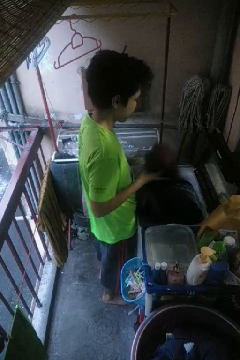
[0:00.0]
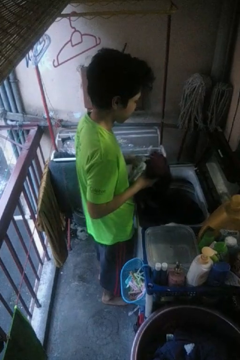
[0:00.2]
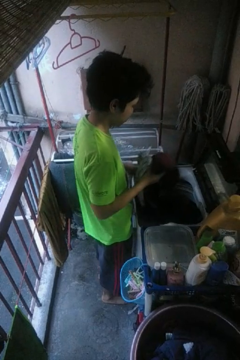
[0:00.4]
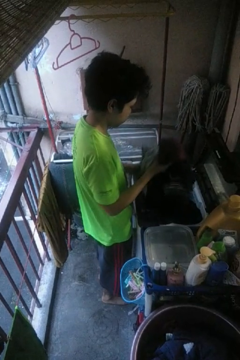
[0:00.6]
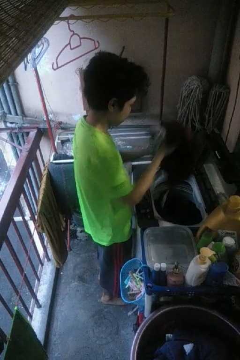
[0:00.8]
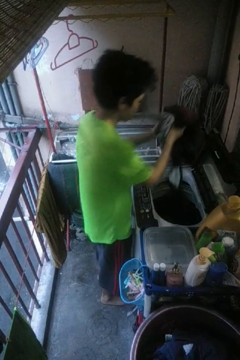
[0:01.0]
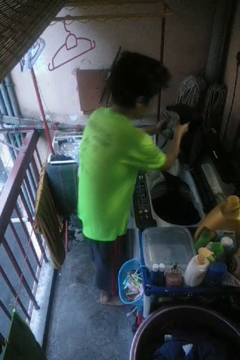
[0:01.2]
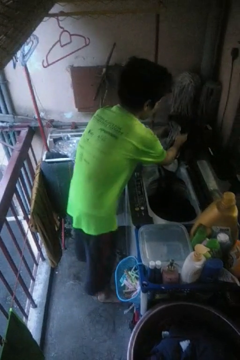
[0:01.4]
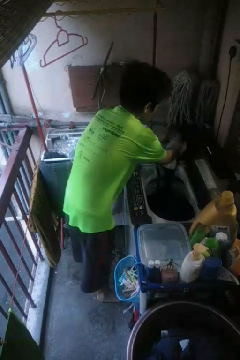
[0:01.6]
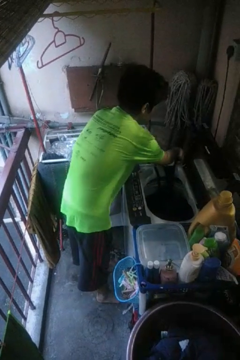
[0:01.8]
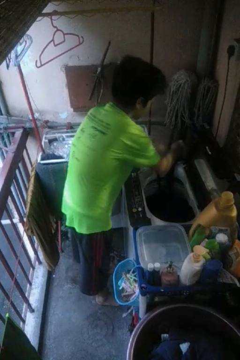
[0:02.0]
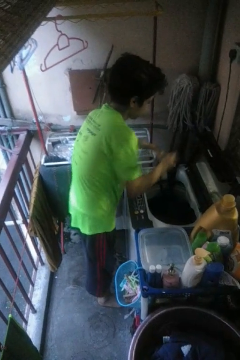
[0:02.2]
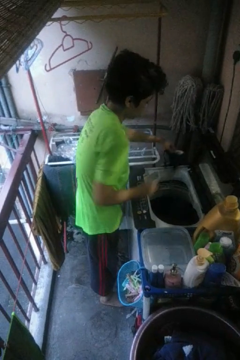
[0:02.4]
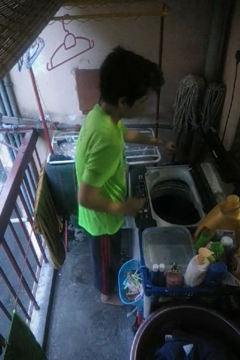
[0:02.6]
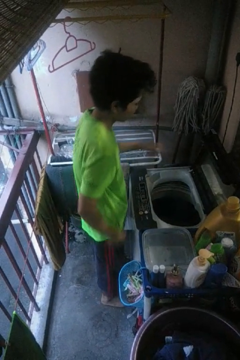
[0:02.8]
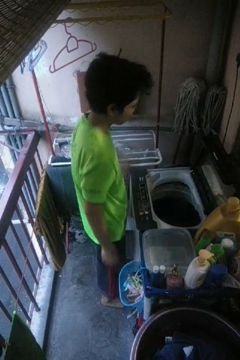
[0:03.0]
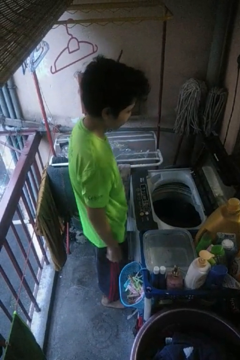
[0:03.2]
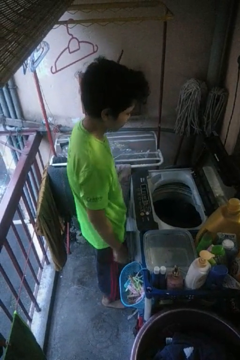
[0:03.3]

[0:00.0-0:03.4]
person loads dryer

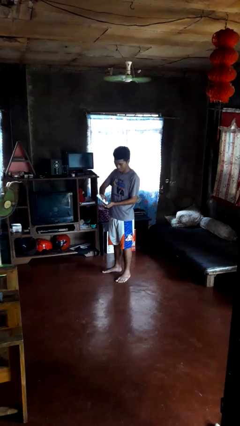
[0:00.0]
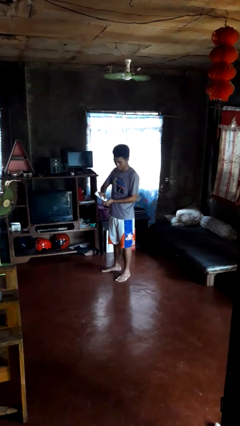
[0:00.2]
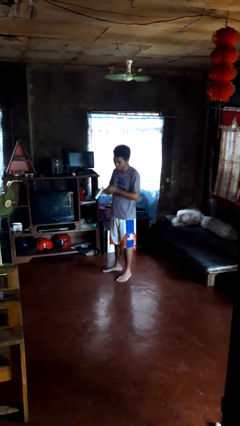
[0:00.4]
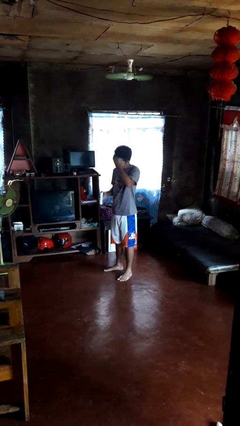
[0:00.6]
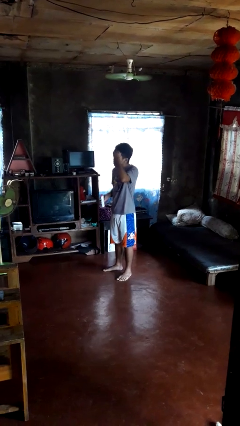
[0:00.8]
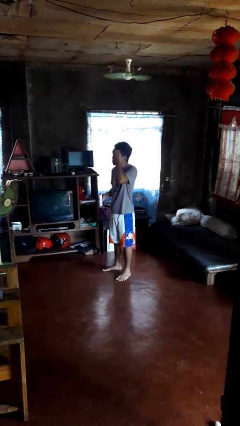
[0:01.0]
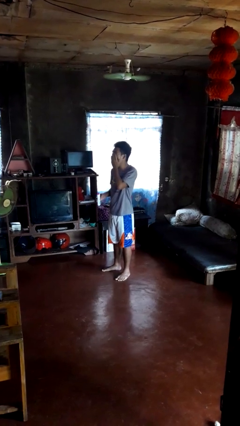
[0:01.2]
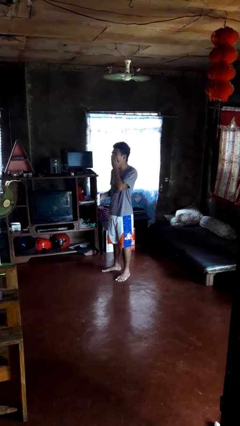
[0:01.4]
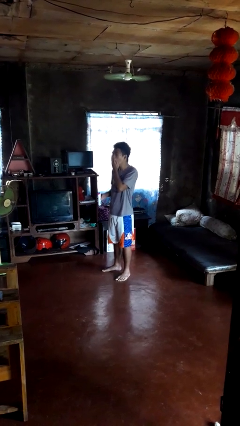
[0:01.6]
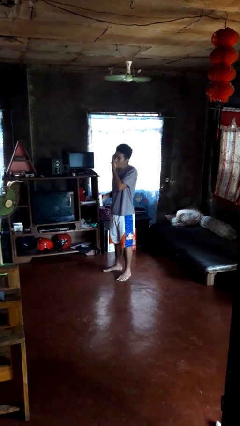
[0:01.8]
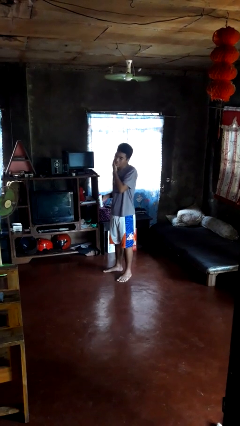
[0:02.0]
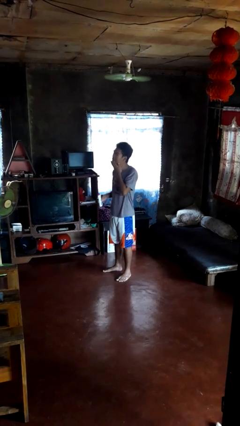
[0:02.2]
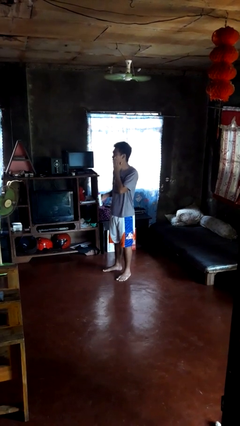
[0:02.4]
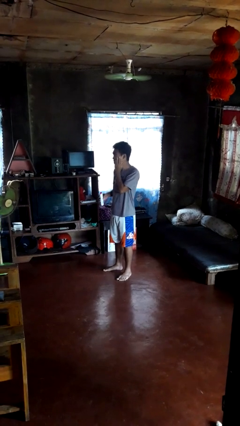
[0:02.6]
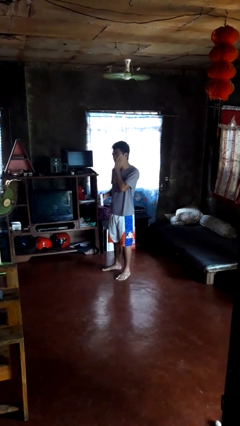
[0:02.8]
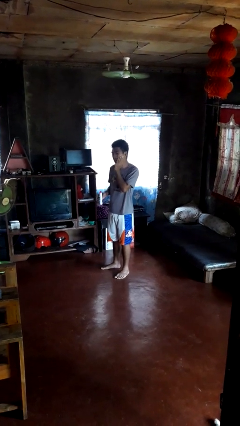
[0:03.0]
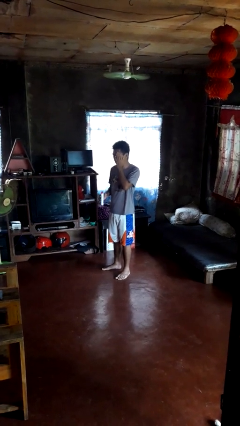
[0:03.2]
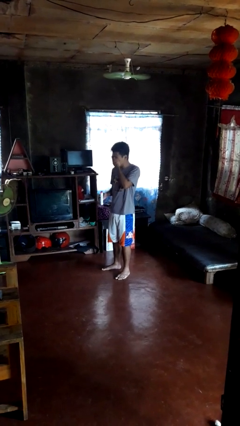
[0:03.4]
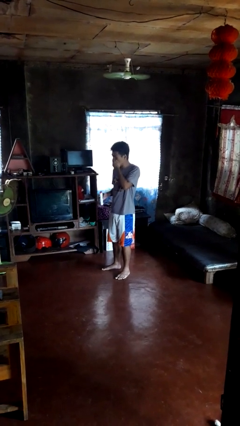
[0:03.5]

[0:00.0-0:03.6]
person applies facial moisturizer

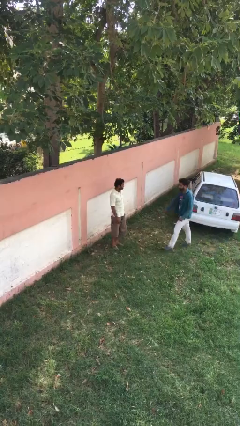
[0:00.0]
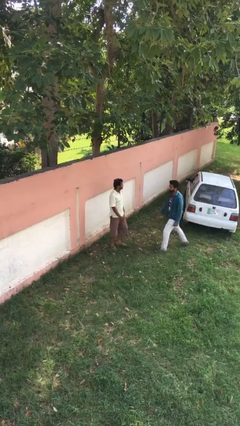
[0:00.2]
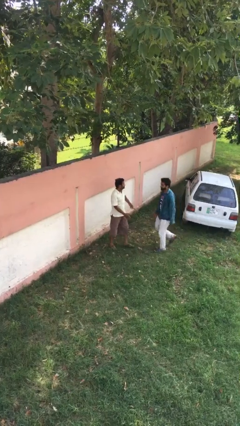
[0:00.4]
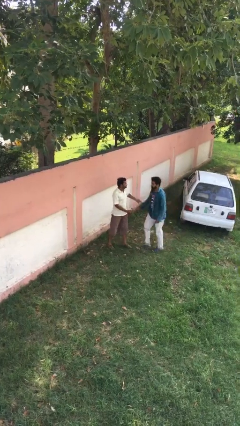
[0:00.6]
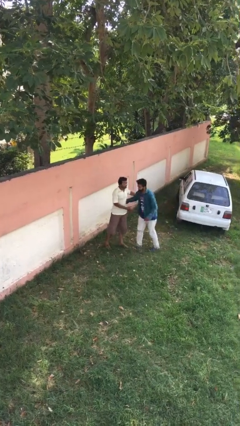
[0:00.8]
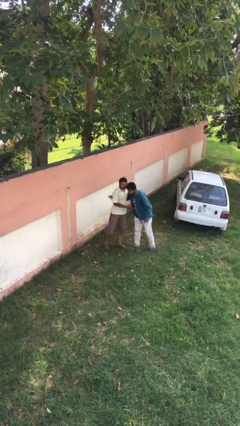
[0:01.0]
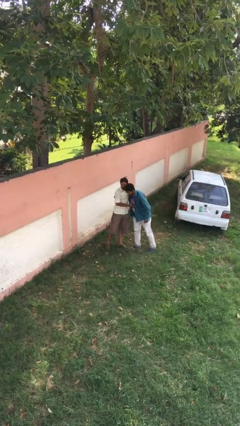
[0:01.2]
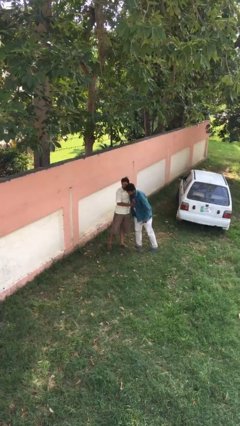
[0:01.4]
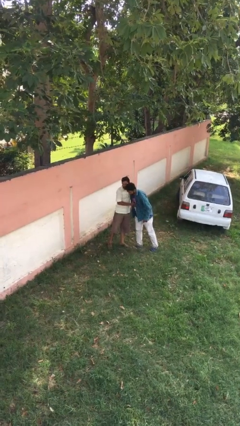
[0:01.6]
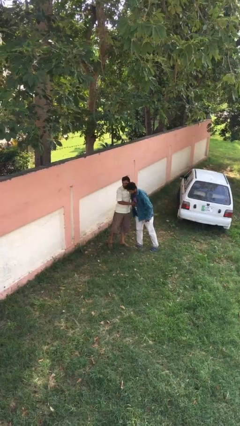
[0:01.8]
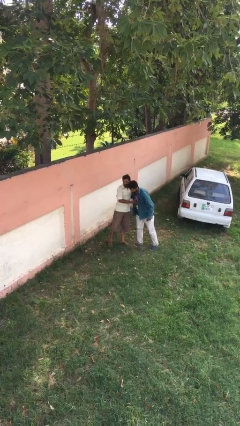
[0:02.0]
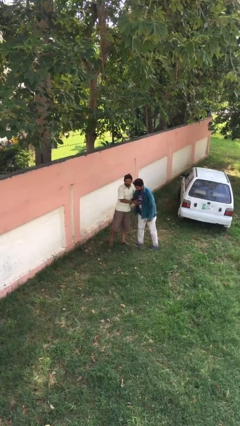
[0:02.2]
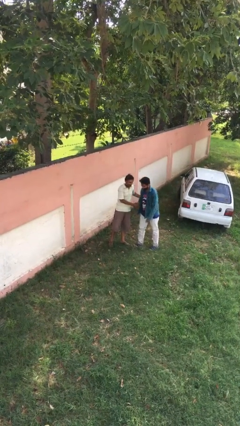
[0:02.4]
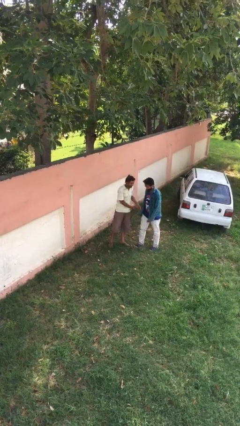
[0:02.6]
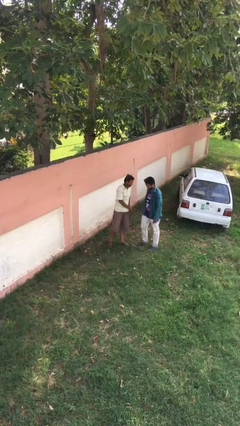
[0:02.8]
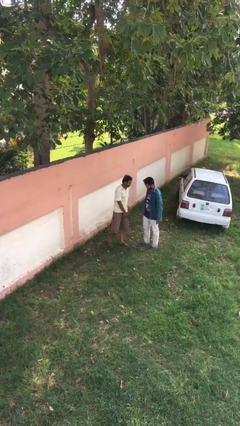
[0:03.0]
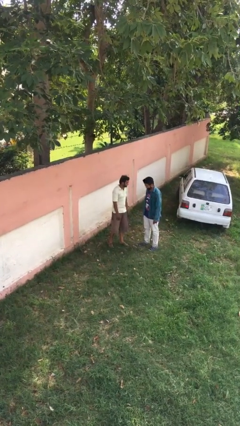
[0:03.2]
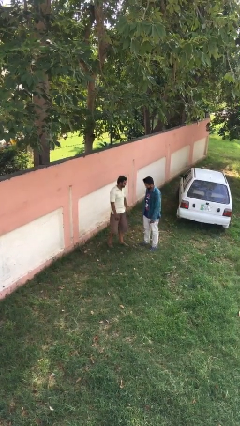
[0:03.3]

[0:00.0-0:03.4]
person embraces person

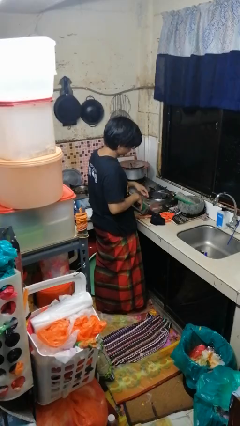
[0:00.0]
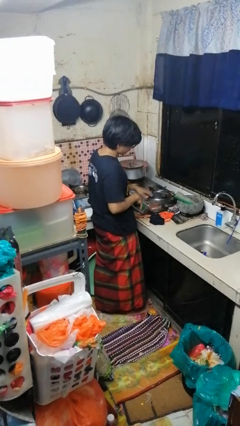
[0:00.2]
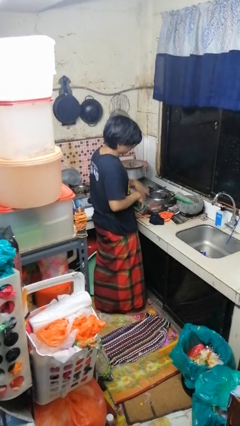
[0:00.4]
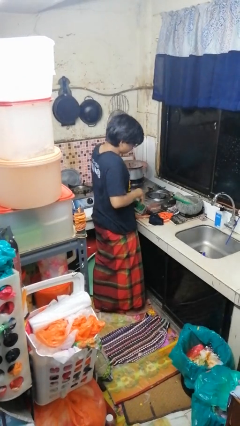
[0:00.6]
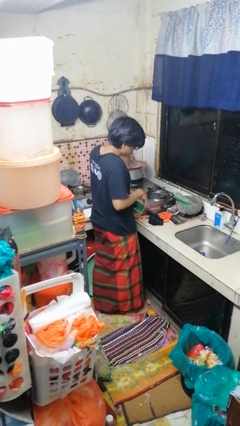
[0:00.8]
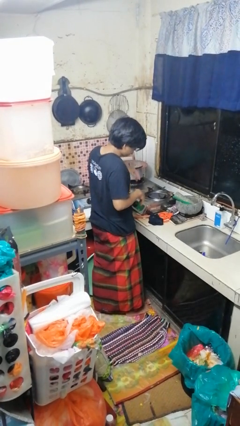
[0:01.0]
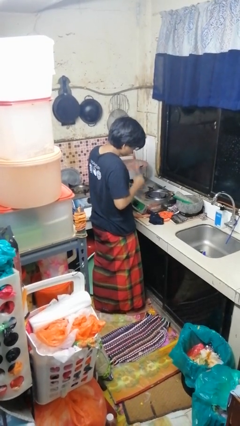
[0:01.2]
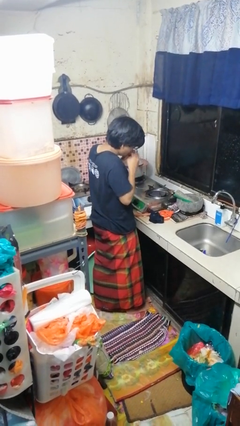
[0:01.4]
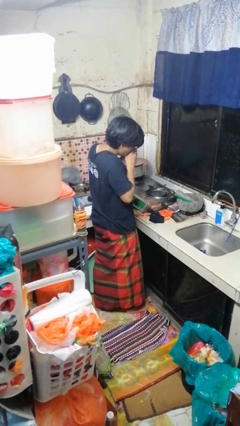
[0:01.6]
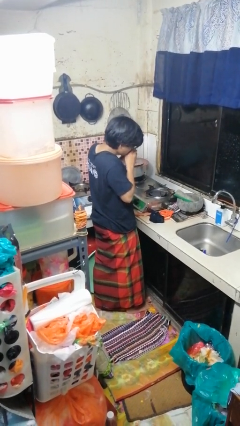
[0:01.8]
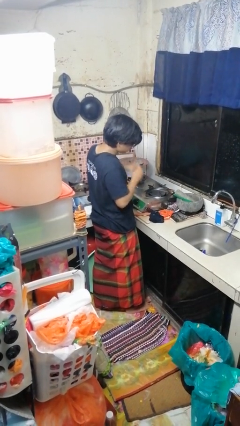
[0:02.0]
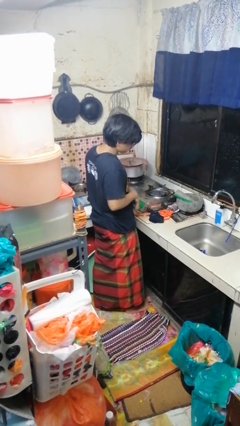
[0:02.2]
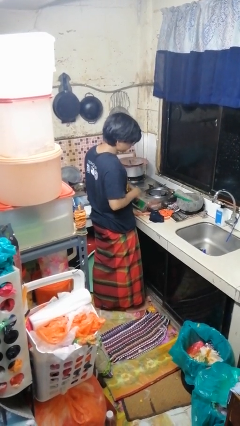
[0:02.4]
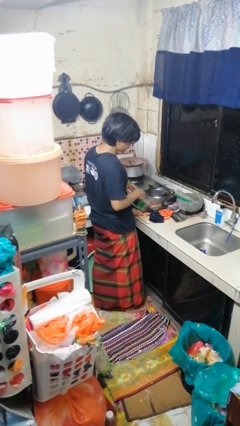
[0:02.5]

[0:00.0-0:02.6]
person burns hand

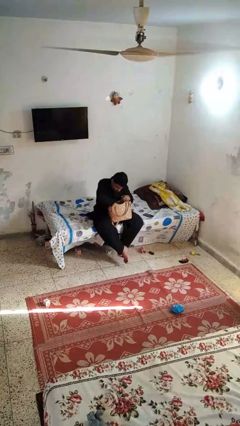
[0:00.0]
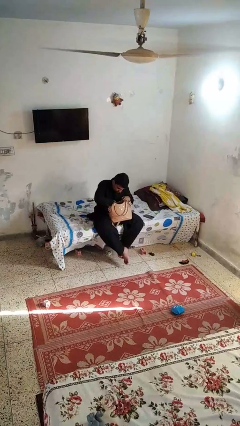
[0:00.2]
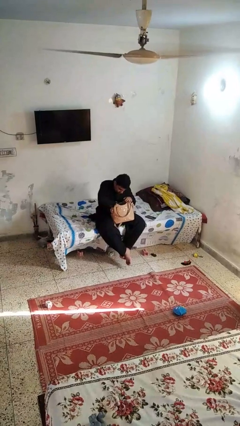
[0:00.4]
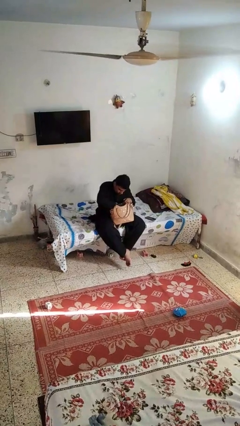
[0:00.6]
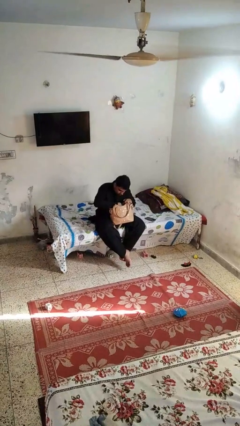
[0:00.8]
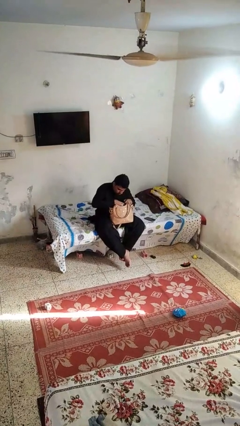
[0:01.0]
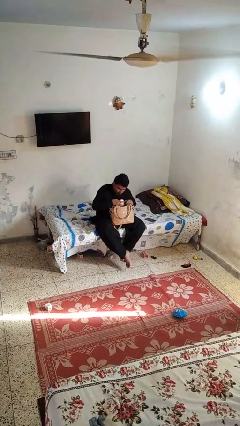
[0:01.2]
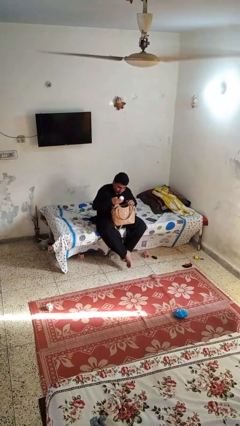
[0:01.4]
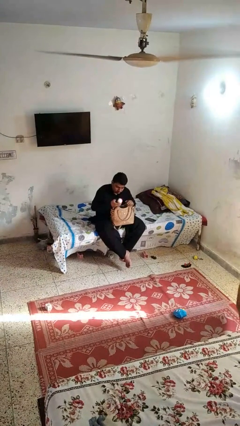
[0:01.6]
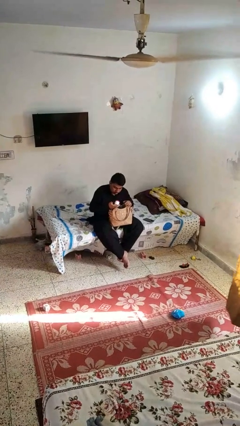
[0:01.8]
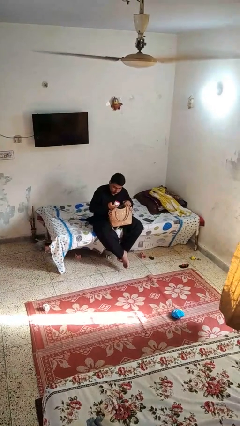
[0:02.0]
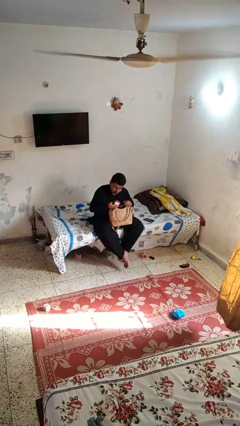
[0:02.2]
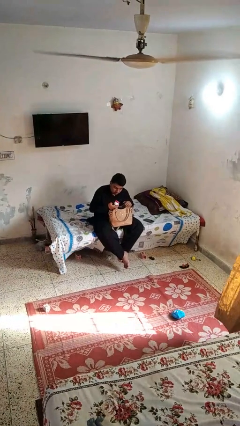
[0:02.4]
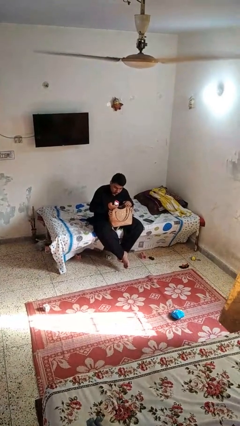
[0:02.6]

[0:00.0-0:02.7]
person takes object from purse

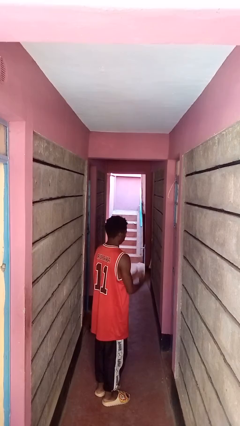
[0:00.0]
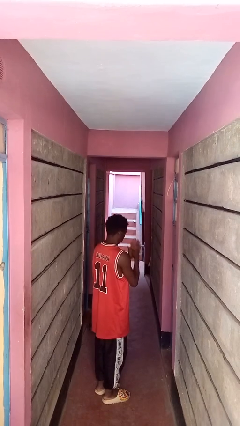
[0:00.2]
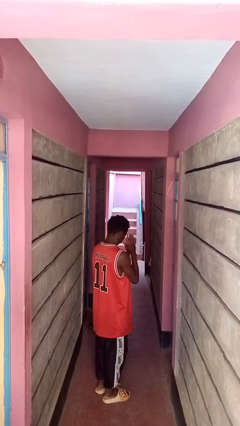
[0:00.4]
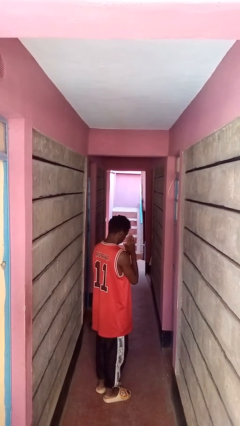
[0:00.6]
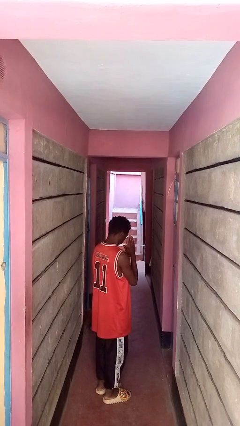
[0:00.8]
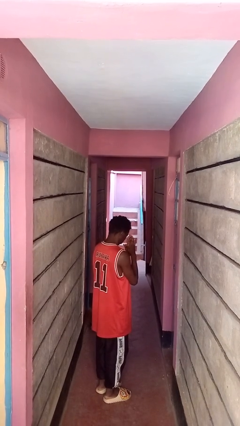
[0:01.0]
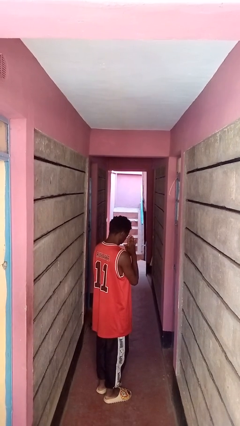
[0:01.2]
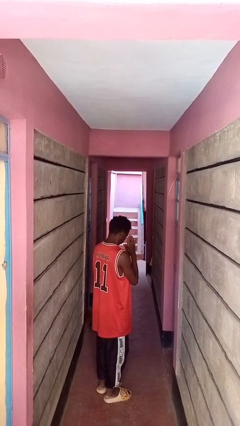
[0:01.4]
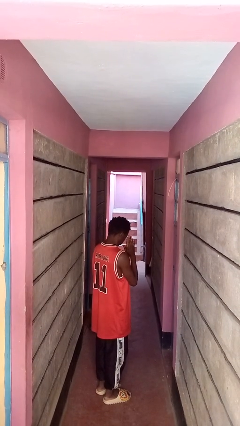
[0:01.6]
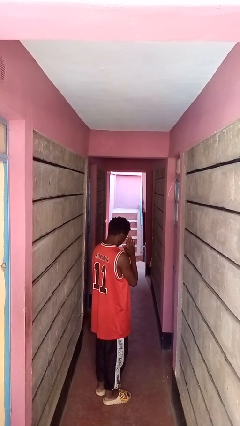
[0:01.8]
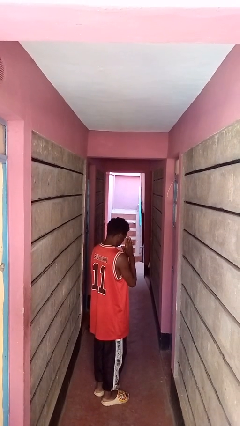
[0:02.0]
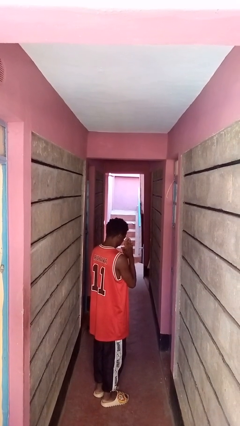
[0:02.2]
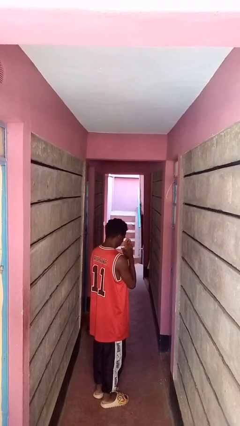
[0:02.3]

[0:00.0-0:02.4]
person prays
